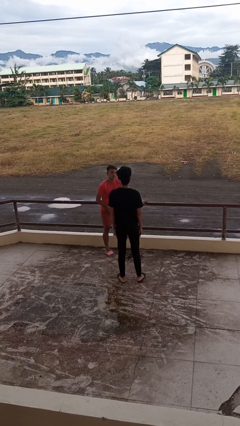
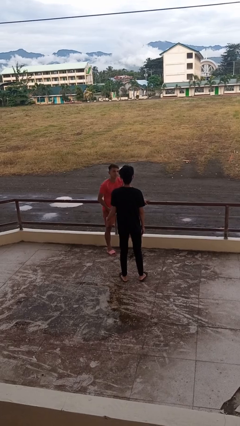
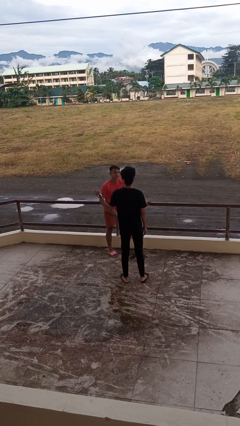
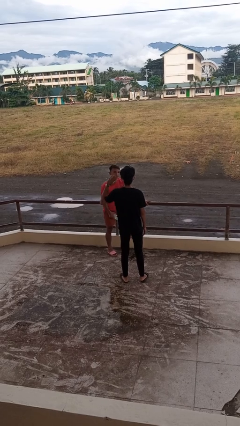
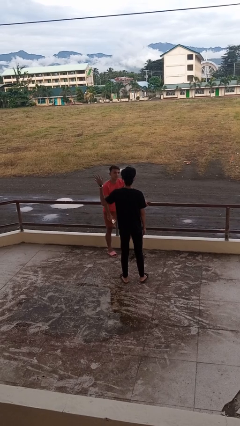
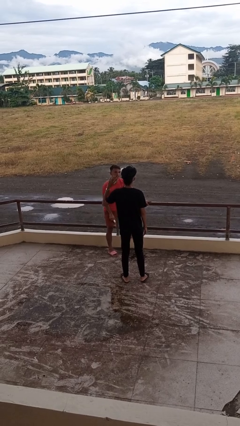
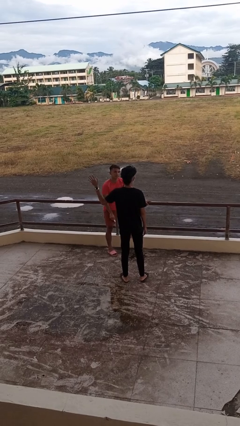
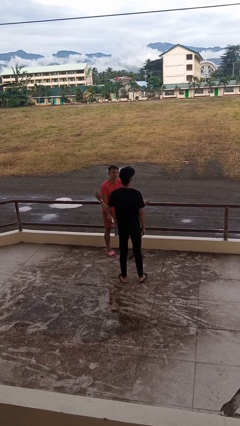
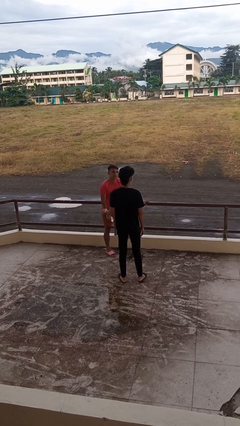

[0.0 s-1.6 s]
person waves at person

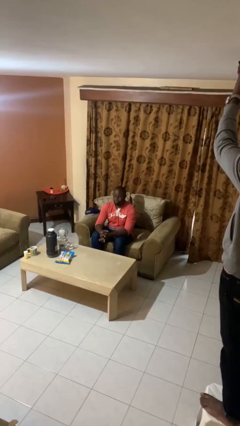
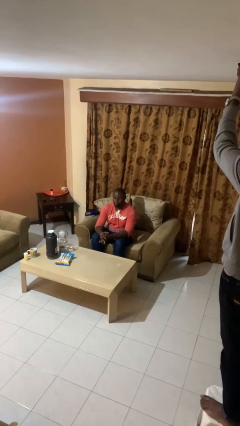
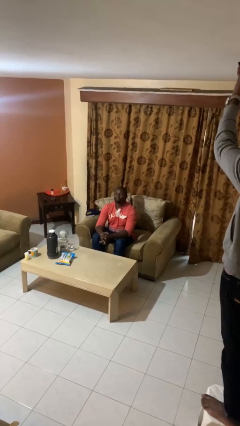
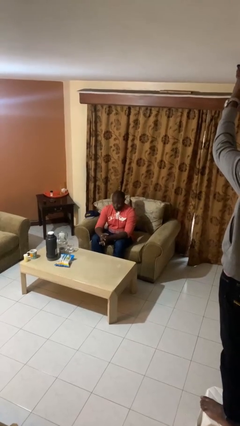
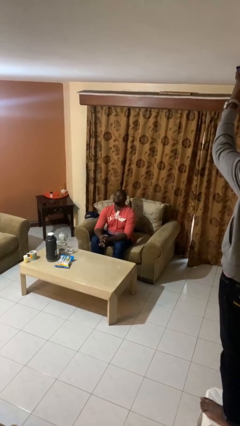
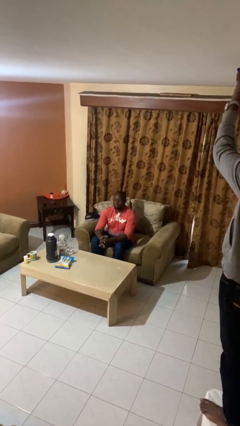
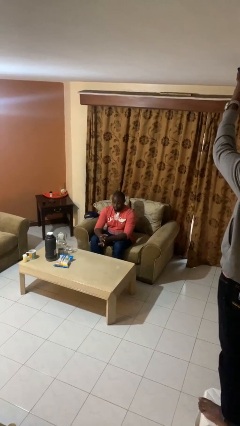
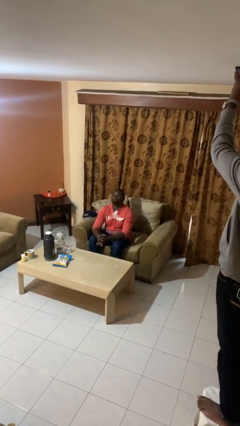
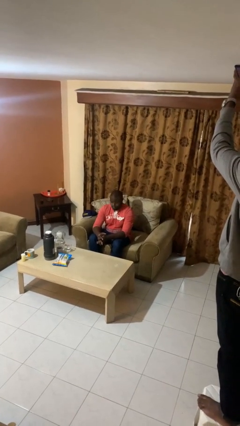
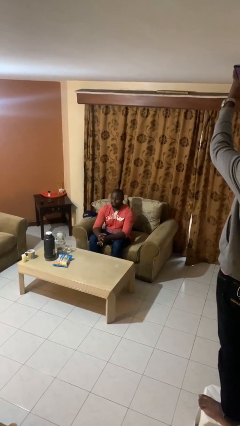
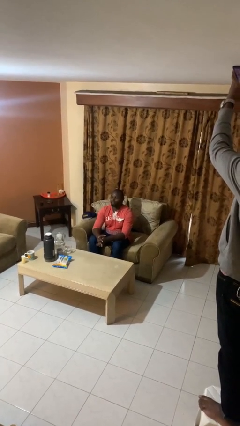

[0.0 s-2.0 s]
person nods head

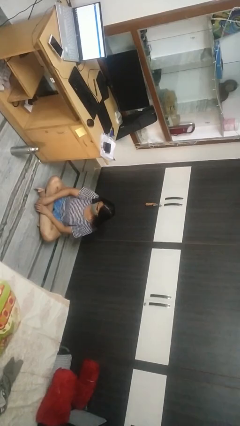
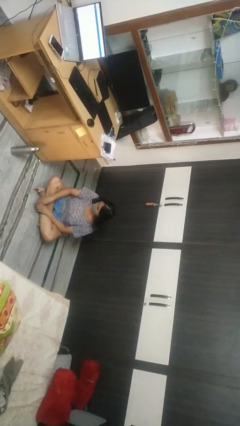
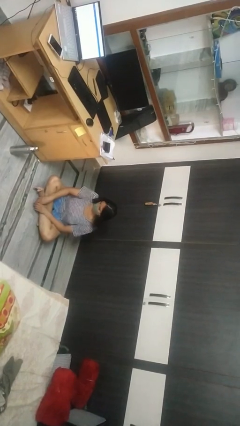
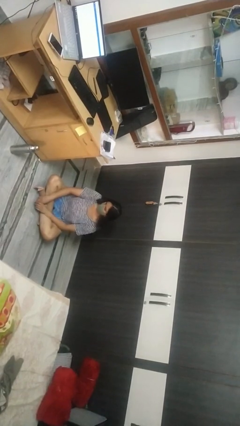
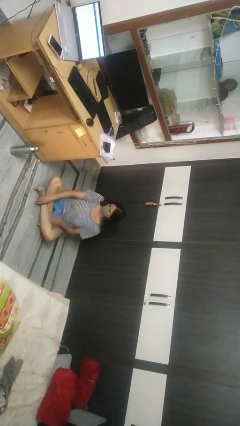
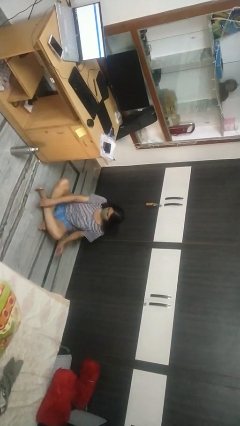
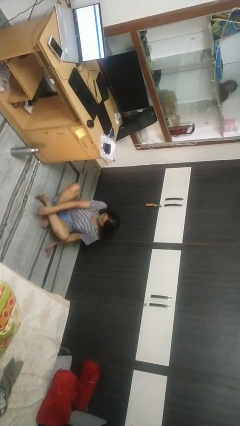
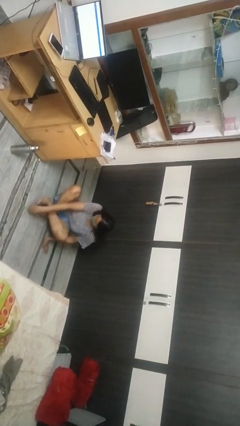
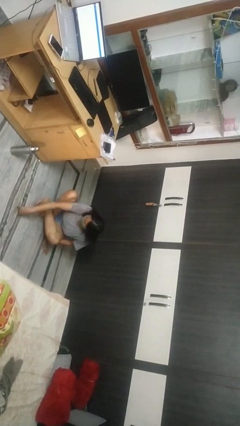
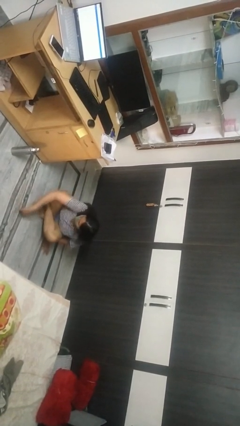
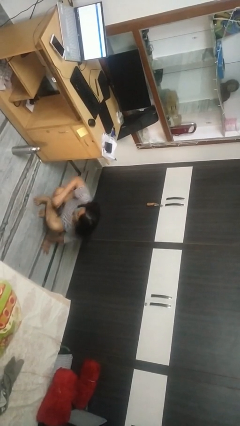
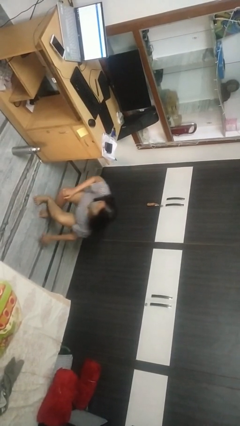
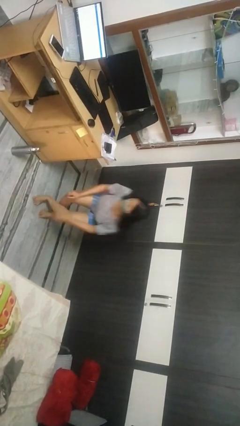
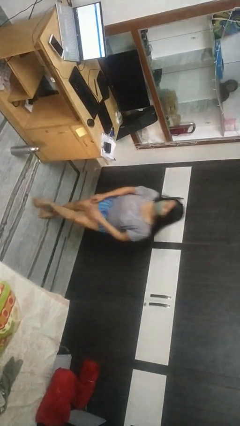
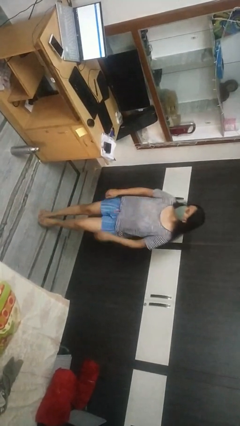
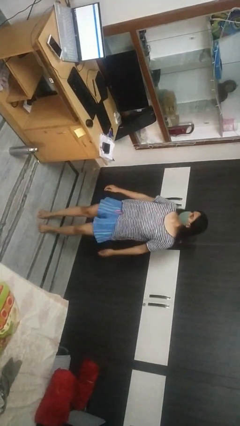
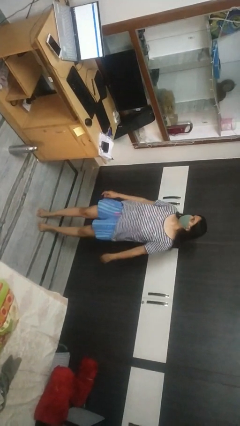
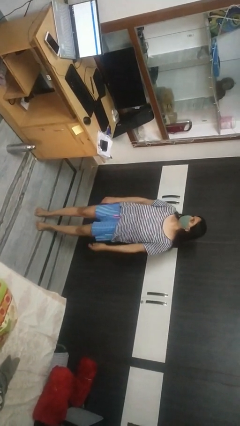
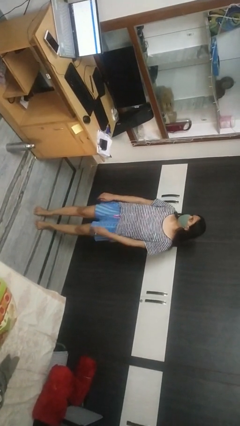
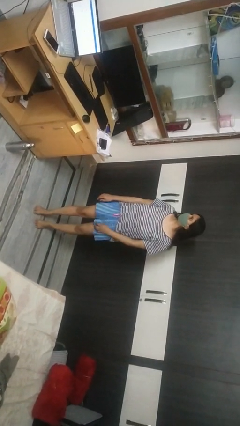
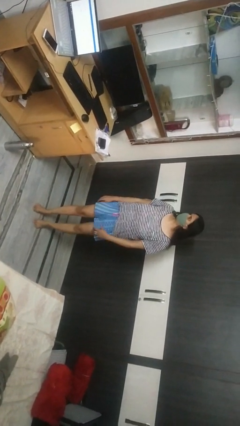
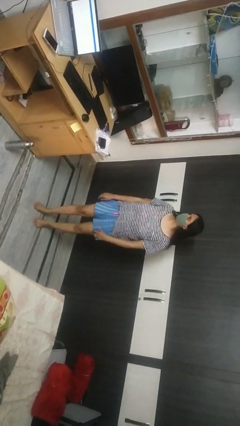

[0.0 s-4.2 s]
person stands up from floor

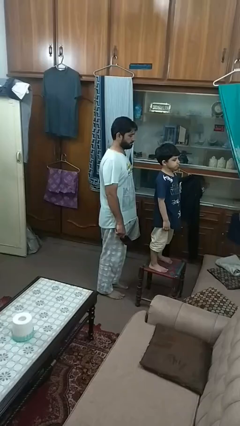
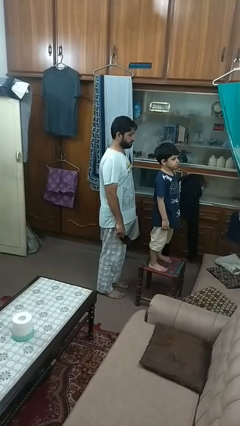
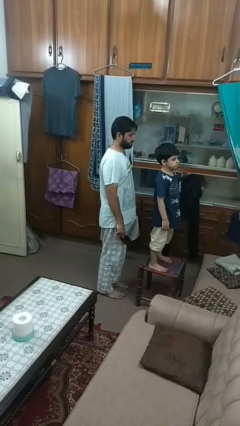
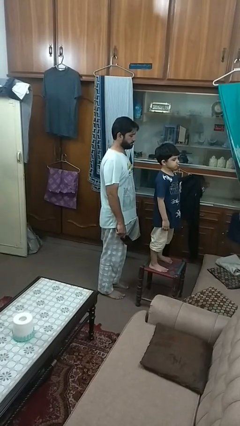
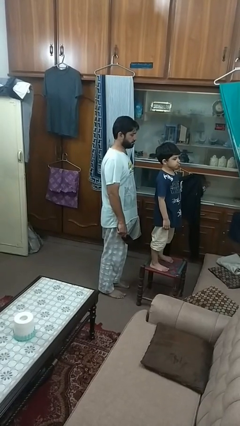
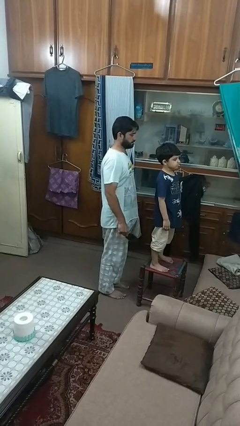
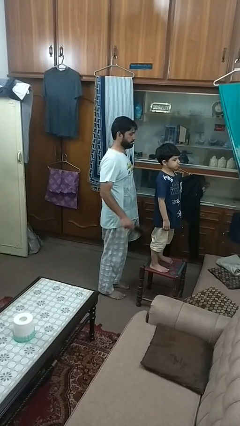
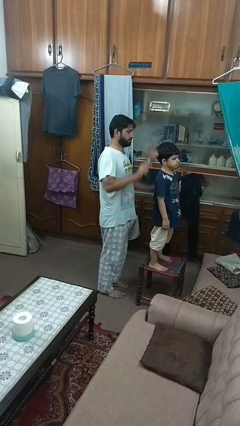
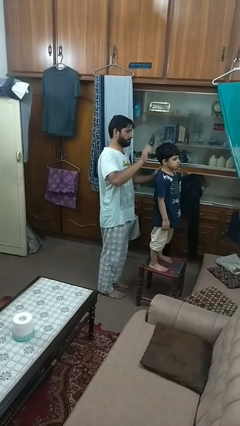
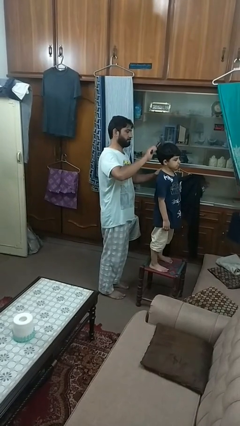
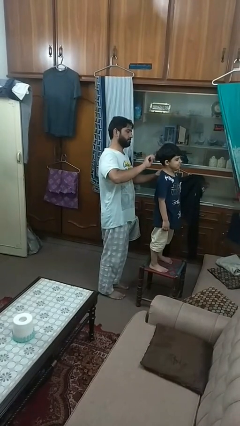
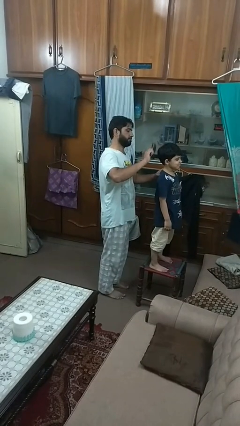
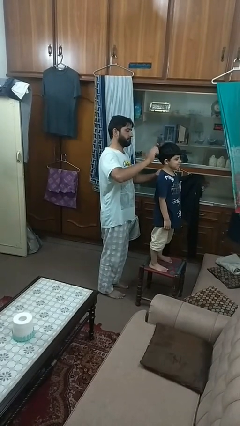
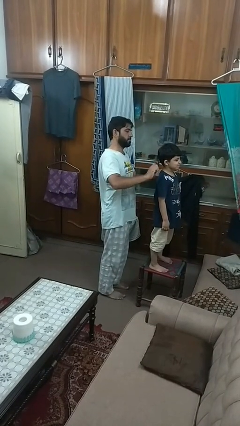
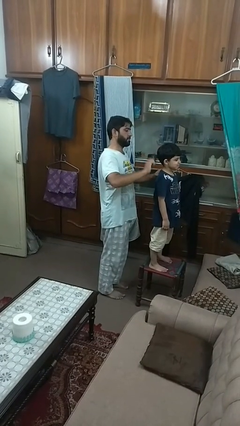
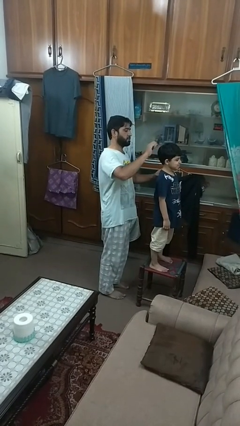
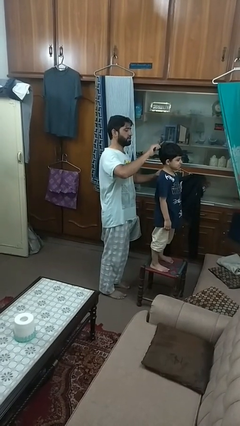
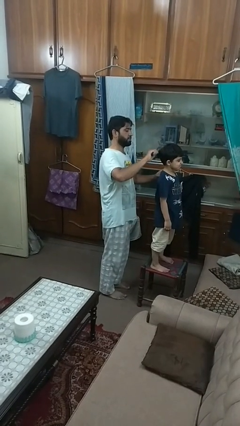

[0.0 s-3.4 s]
person brushes hair of person

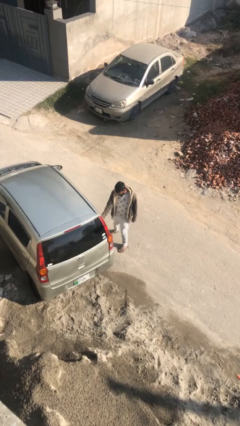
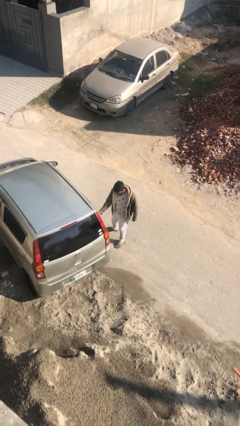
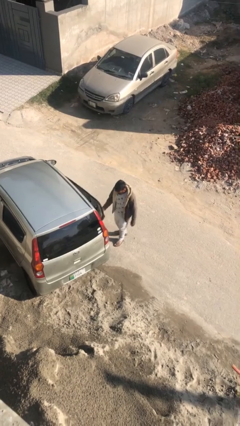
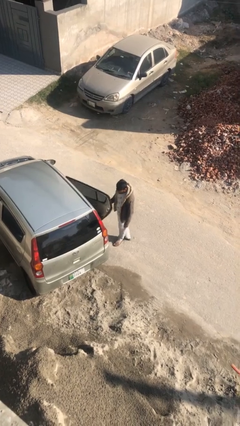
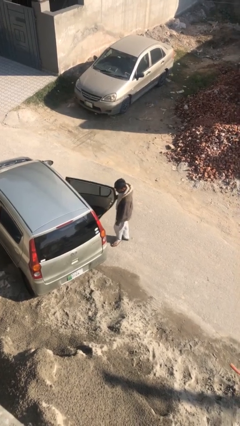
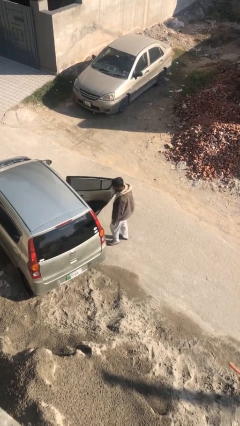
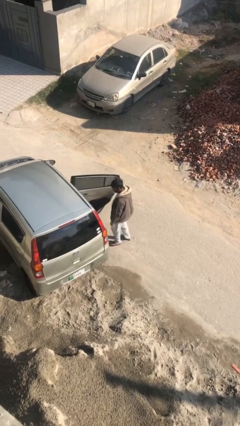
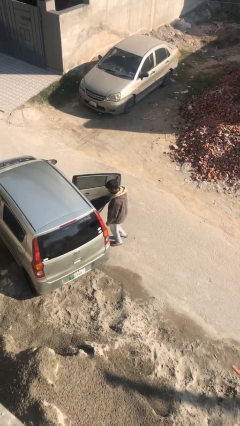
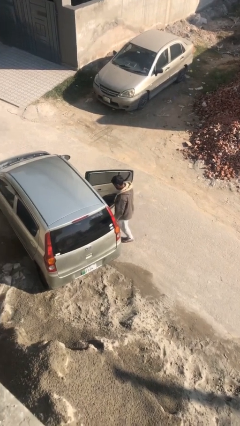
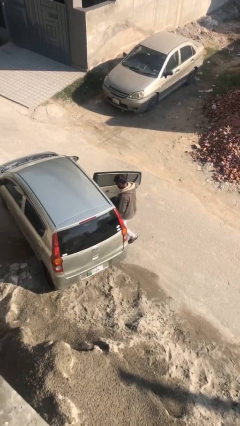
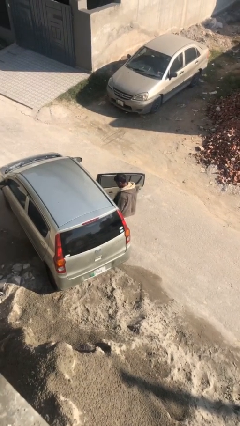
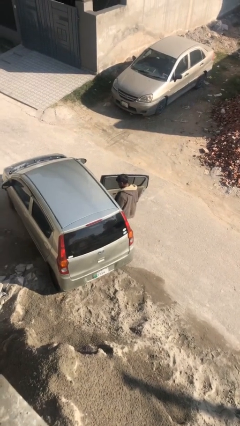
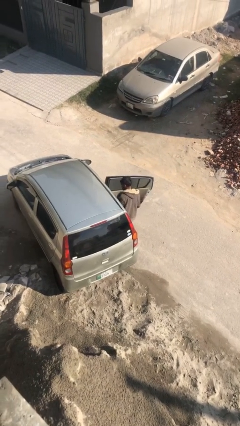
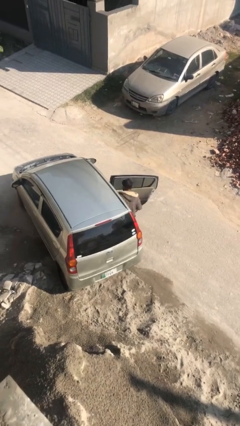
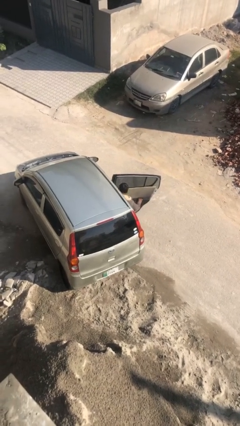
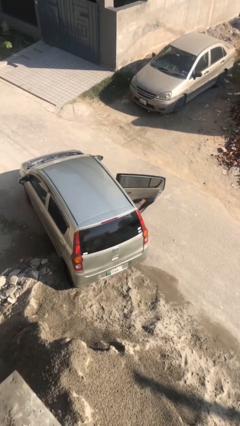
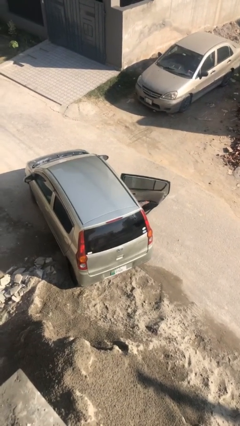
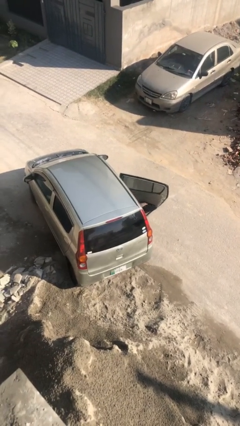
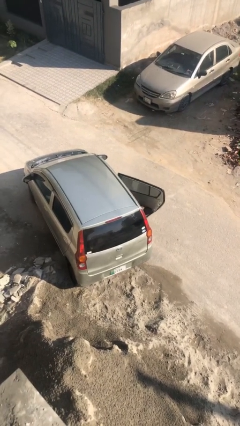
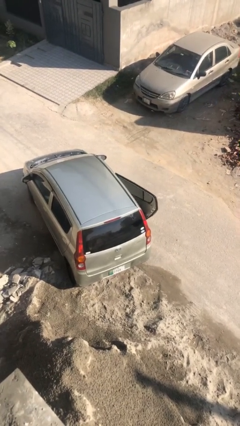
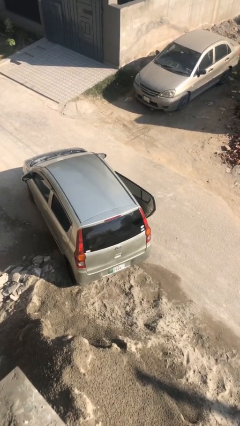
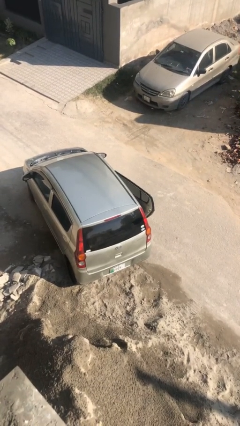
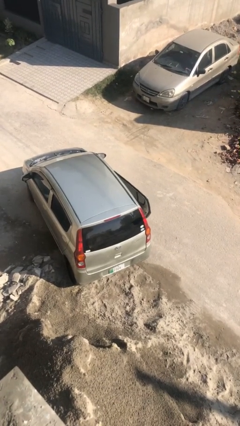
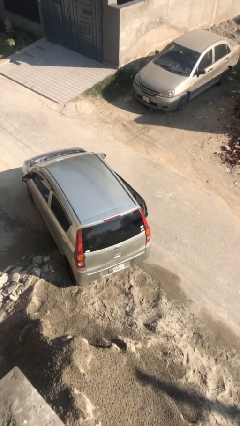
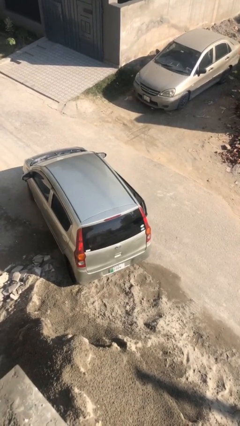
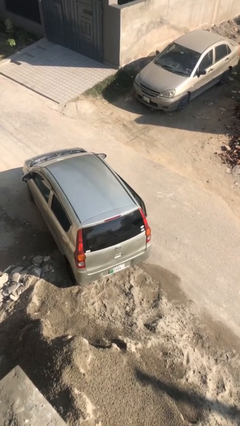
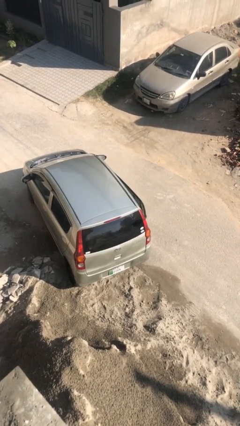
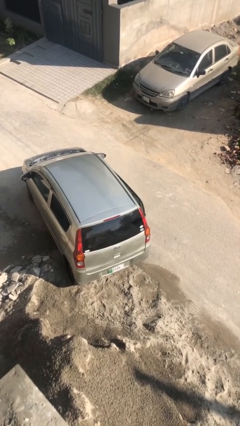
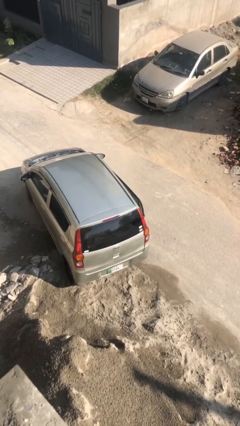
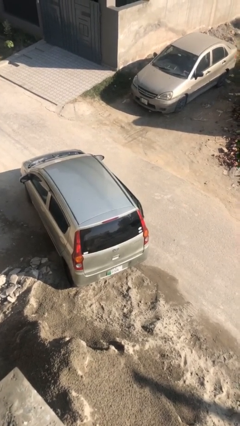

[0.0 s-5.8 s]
car picks up person

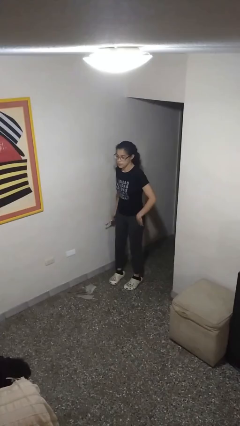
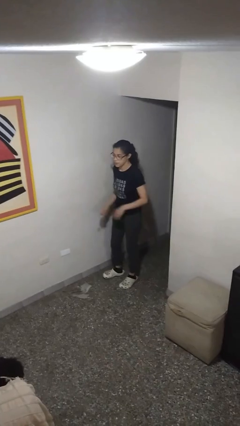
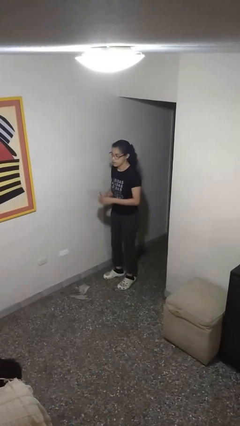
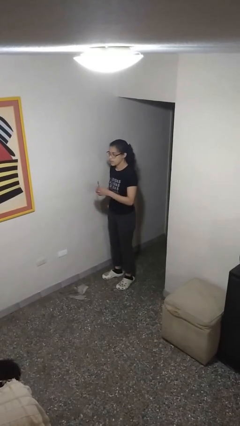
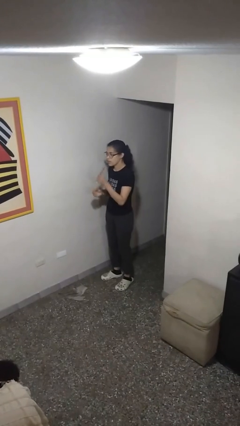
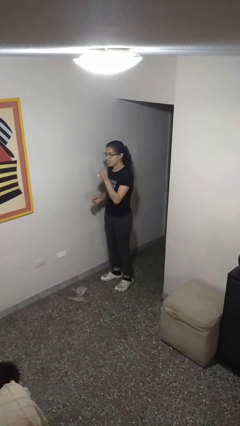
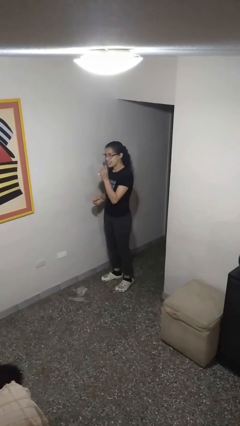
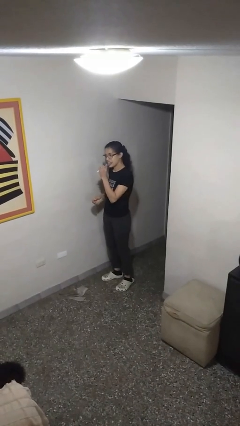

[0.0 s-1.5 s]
person brushes teeth
